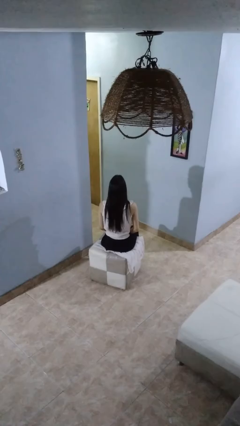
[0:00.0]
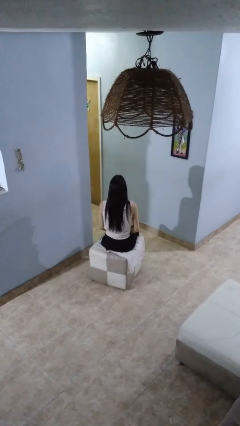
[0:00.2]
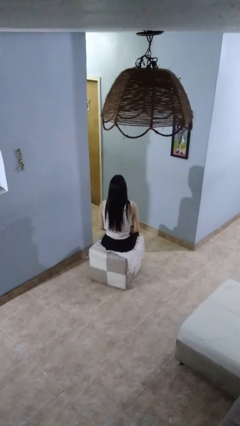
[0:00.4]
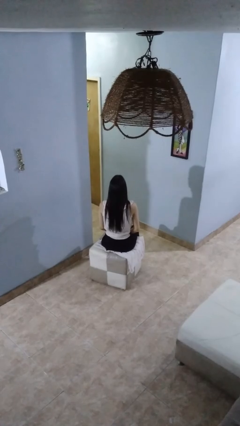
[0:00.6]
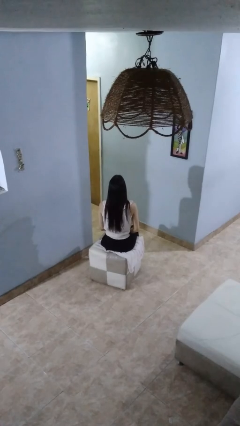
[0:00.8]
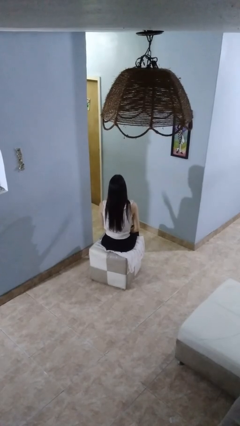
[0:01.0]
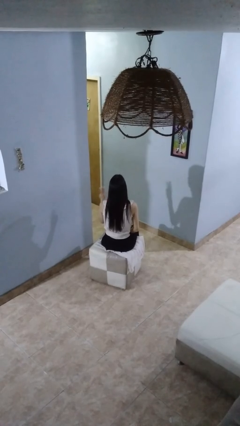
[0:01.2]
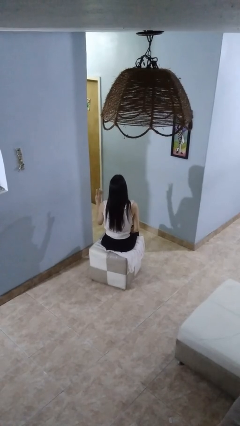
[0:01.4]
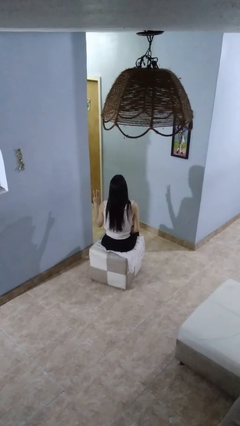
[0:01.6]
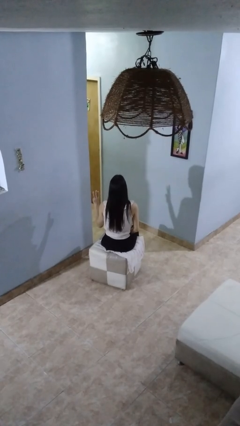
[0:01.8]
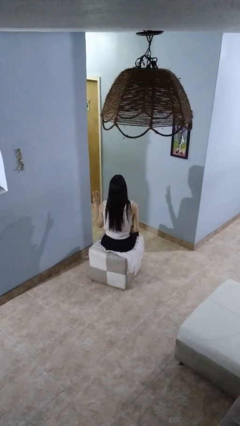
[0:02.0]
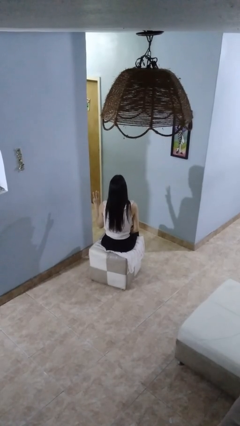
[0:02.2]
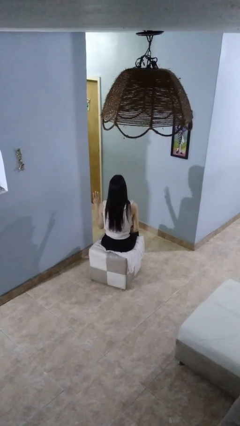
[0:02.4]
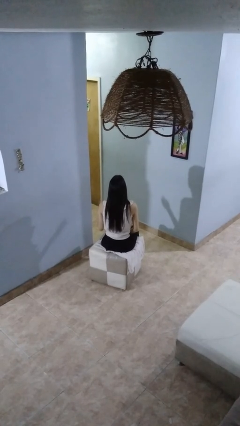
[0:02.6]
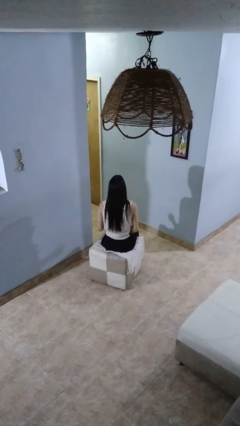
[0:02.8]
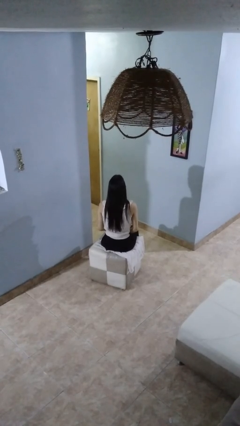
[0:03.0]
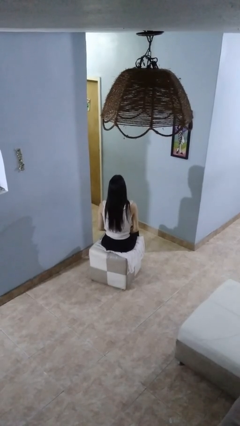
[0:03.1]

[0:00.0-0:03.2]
person gestures number three

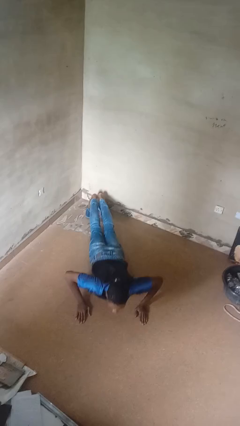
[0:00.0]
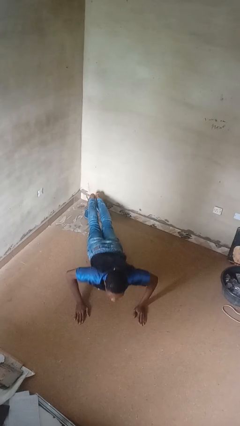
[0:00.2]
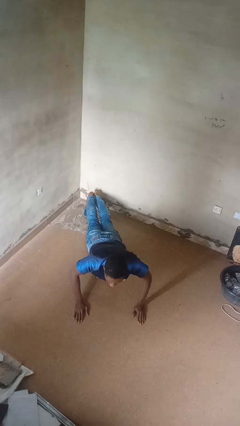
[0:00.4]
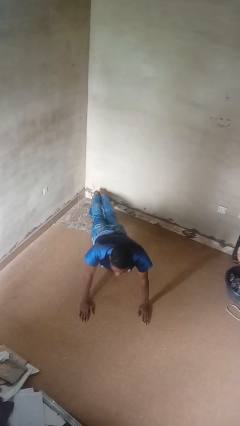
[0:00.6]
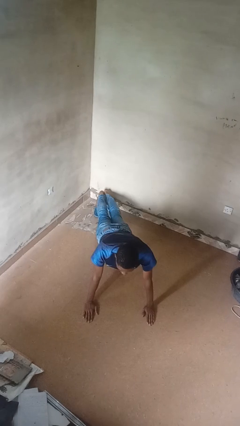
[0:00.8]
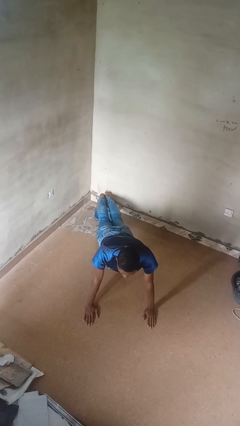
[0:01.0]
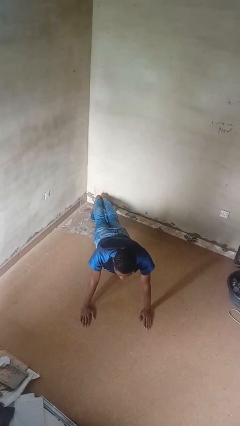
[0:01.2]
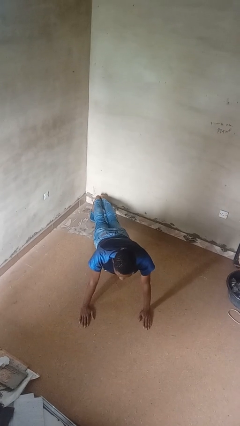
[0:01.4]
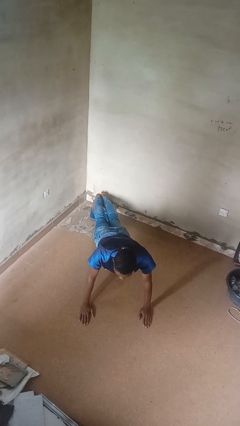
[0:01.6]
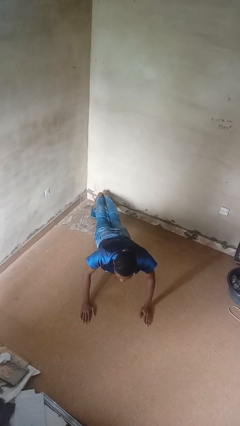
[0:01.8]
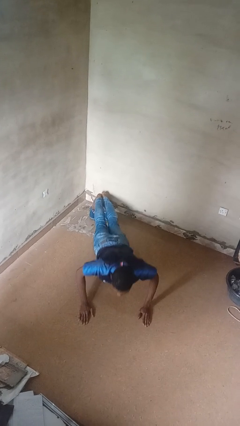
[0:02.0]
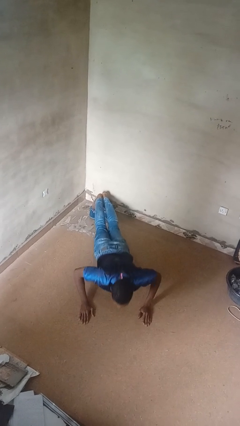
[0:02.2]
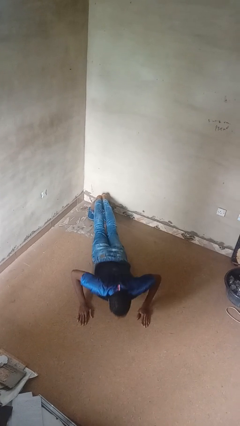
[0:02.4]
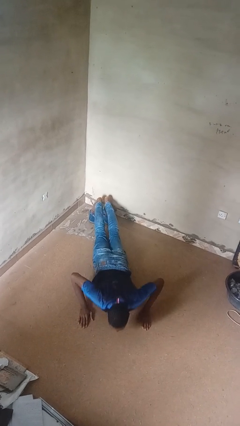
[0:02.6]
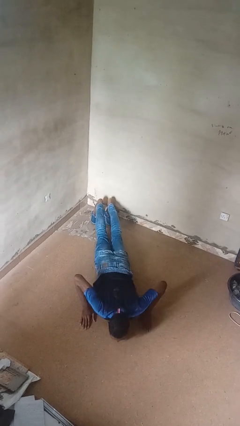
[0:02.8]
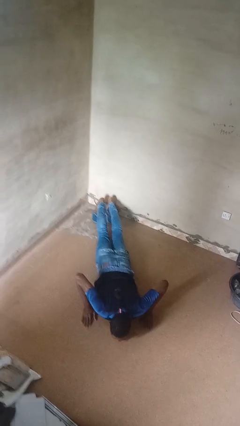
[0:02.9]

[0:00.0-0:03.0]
person exercises with pushup

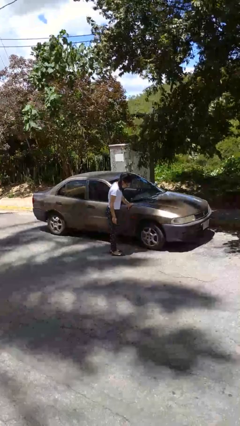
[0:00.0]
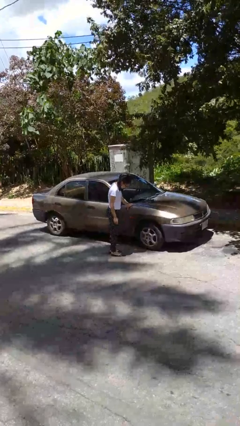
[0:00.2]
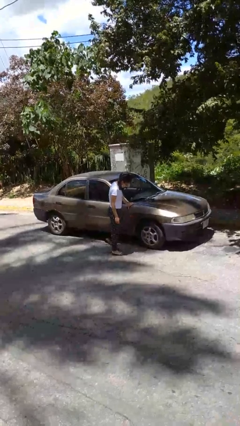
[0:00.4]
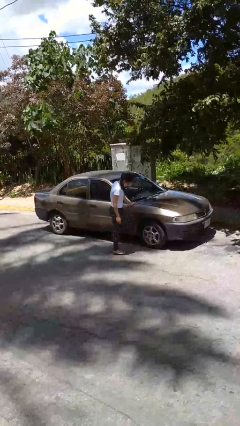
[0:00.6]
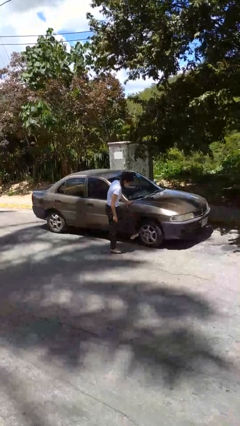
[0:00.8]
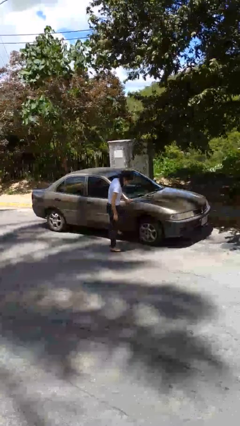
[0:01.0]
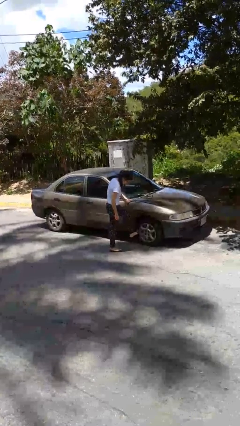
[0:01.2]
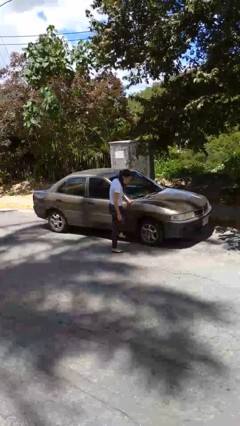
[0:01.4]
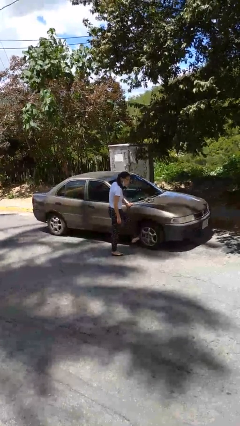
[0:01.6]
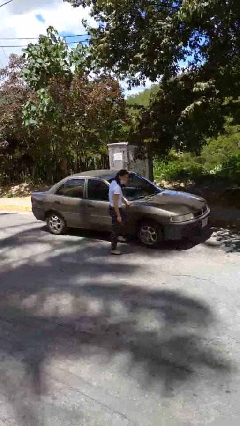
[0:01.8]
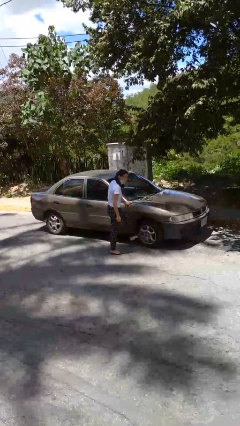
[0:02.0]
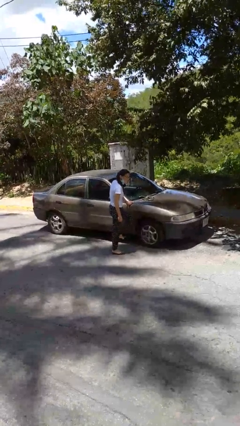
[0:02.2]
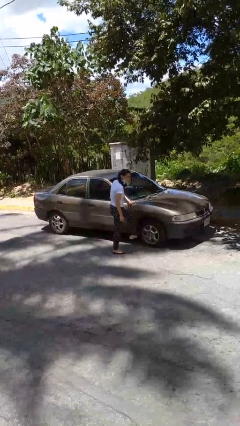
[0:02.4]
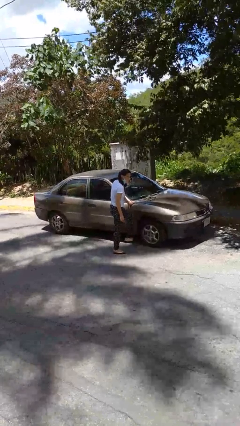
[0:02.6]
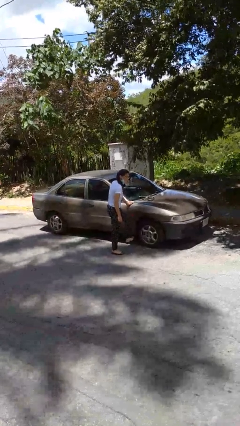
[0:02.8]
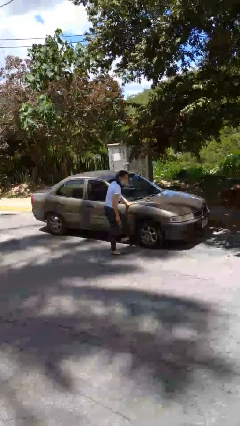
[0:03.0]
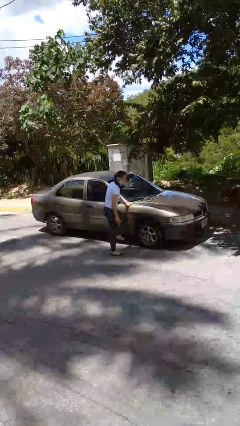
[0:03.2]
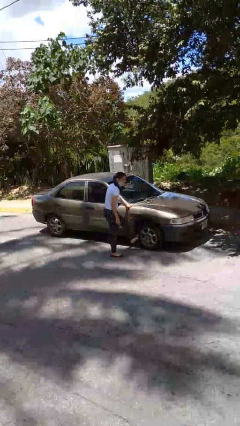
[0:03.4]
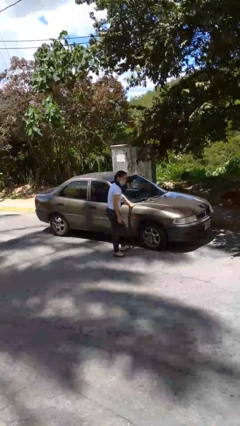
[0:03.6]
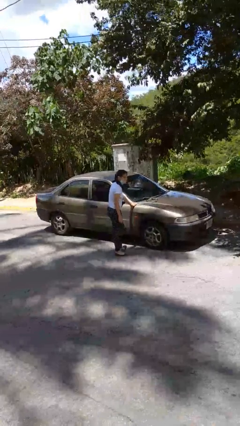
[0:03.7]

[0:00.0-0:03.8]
person kicks car tires

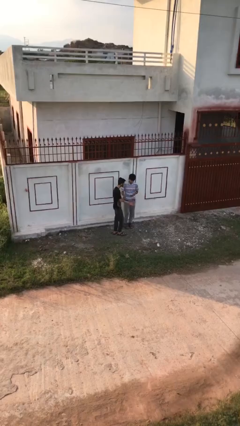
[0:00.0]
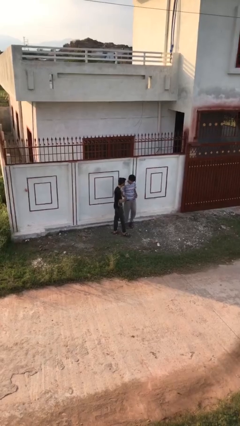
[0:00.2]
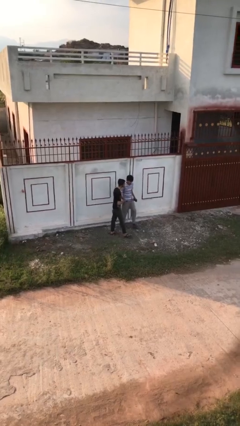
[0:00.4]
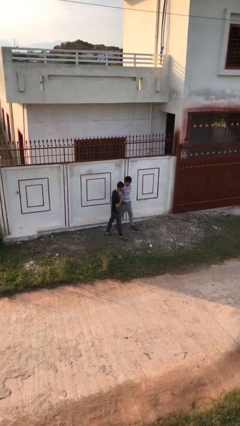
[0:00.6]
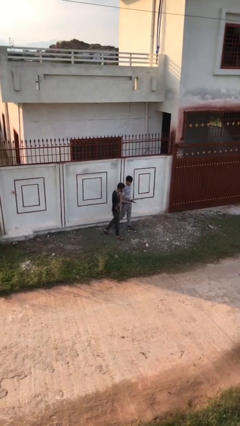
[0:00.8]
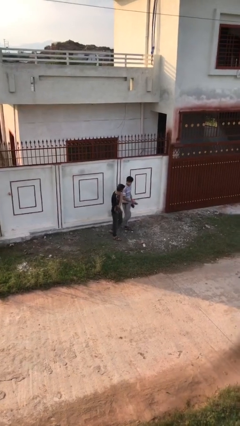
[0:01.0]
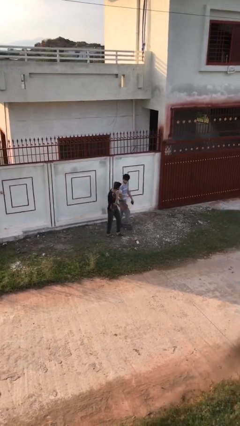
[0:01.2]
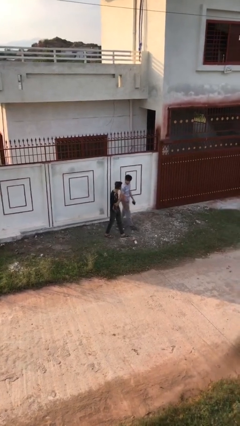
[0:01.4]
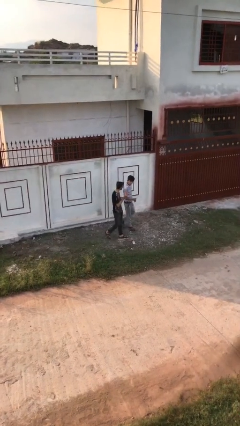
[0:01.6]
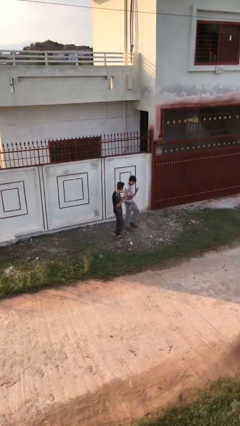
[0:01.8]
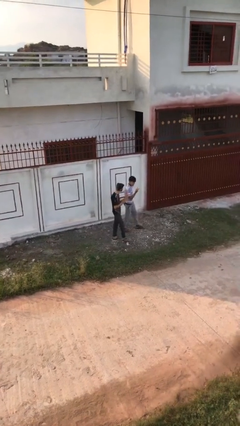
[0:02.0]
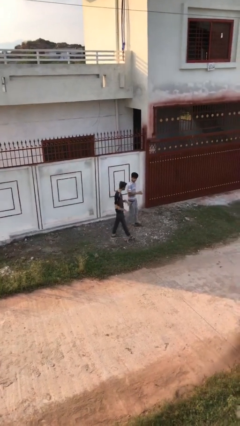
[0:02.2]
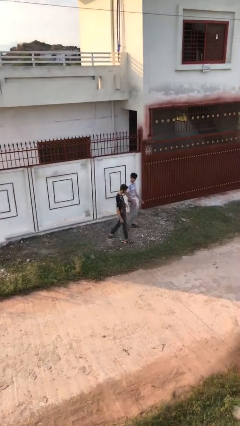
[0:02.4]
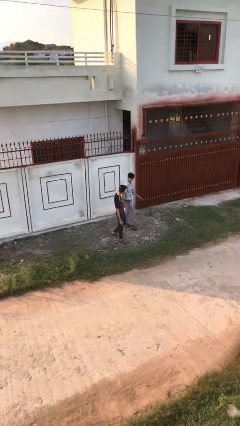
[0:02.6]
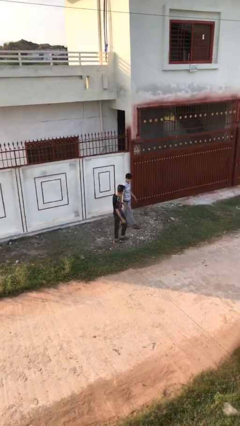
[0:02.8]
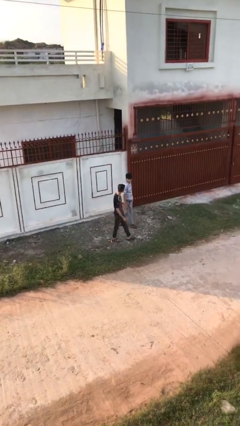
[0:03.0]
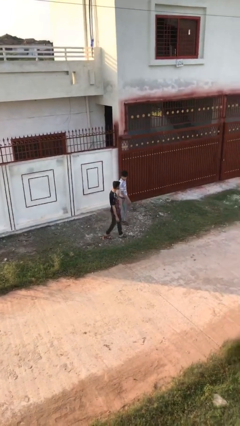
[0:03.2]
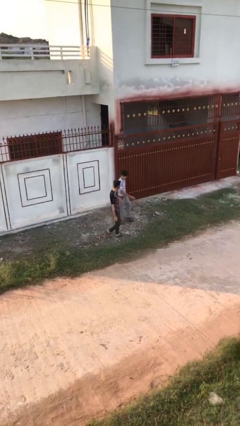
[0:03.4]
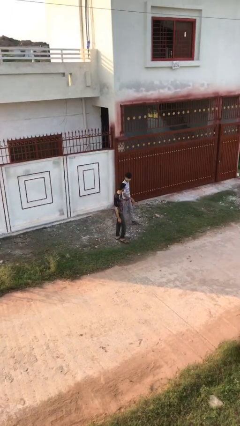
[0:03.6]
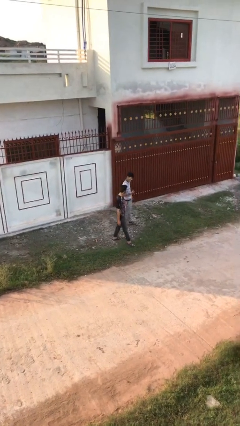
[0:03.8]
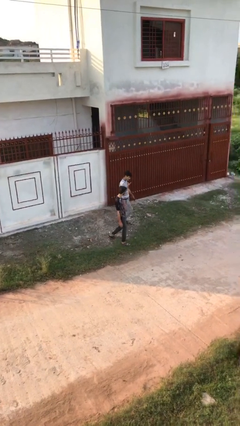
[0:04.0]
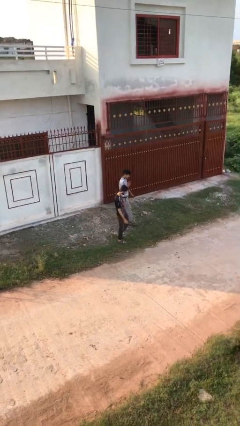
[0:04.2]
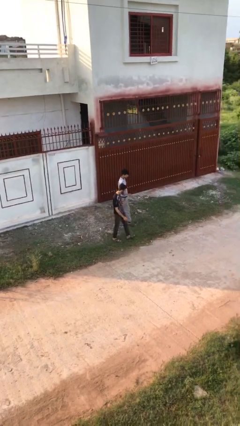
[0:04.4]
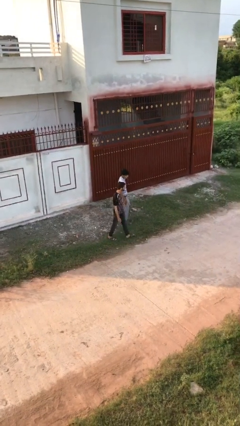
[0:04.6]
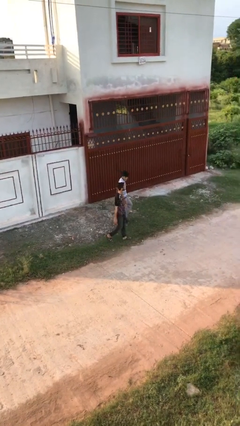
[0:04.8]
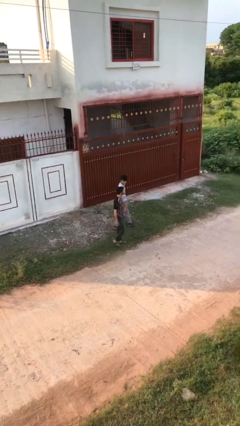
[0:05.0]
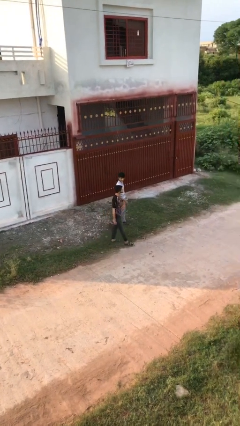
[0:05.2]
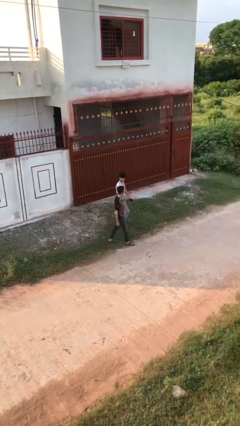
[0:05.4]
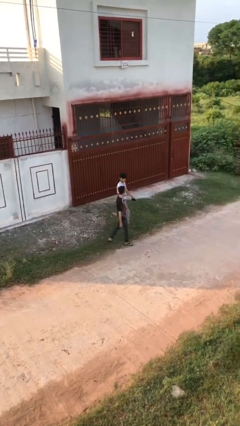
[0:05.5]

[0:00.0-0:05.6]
person talks to person

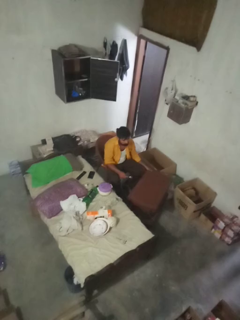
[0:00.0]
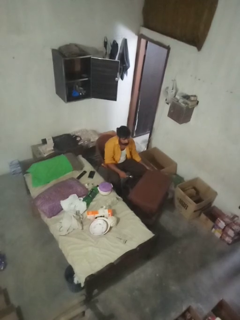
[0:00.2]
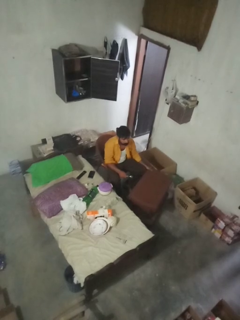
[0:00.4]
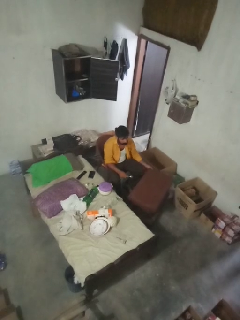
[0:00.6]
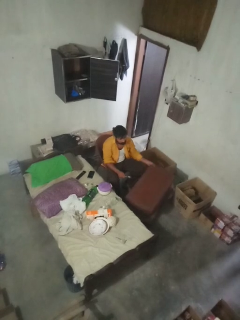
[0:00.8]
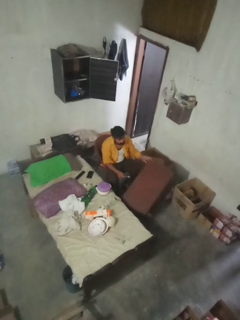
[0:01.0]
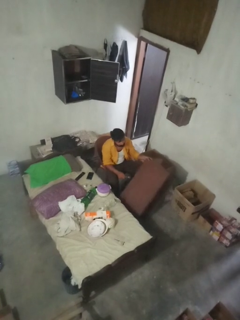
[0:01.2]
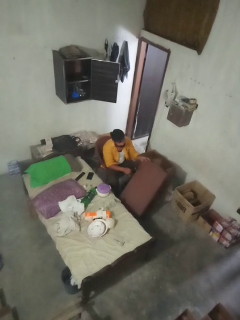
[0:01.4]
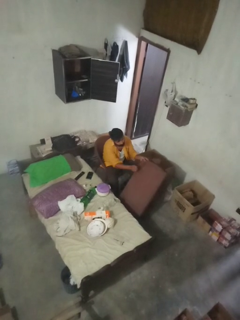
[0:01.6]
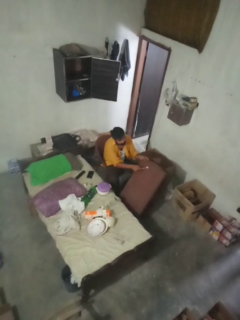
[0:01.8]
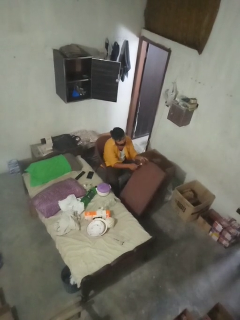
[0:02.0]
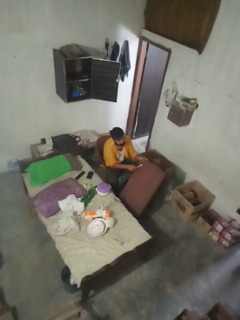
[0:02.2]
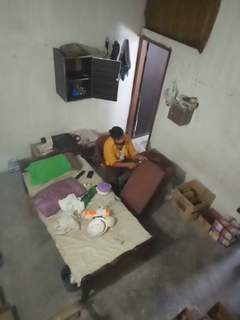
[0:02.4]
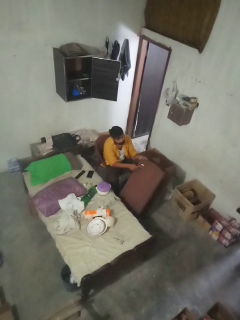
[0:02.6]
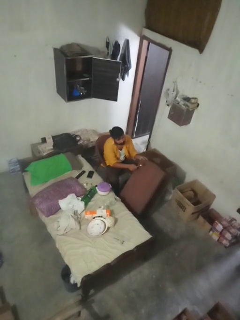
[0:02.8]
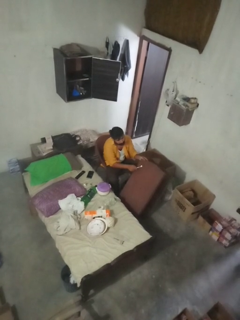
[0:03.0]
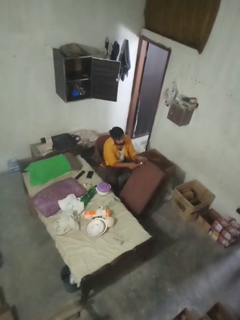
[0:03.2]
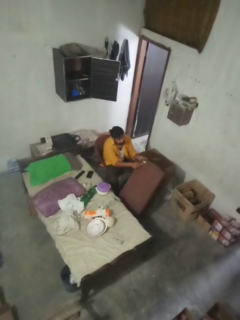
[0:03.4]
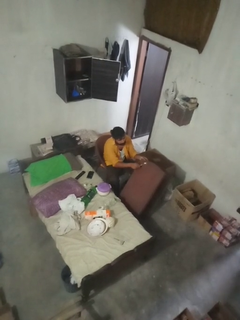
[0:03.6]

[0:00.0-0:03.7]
person knocks over furniture
